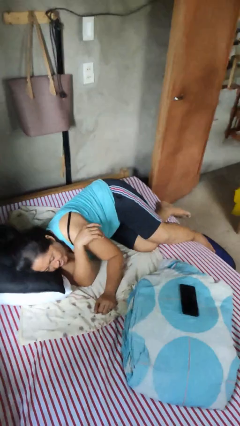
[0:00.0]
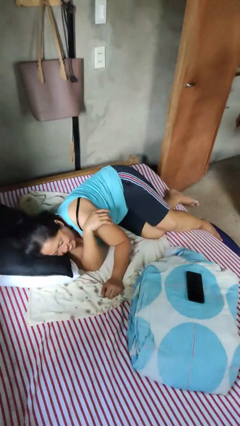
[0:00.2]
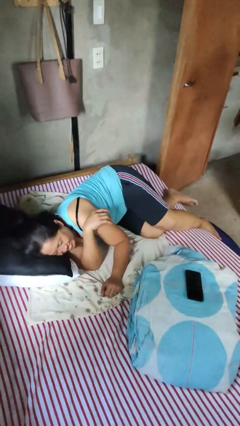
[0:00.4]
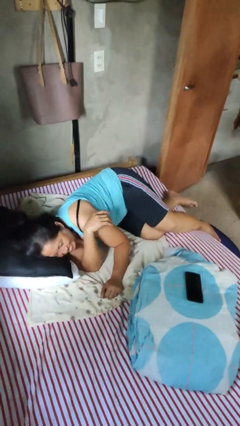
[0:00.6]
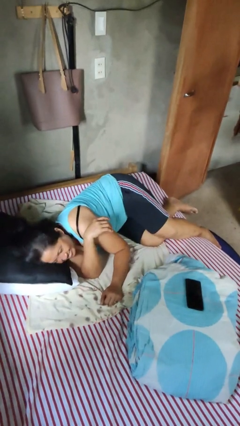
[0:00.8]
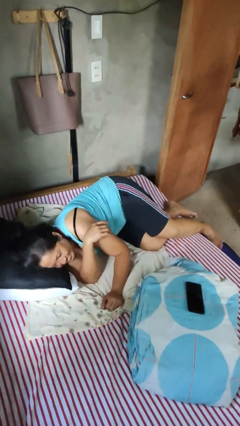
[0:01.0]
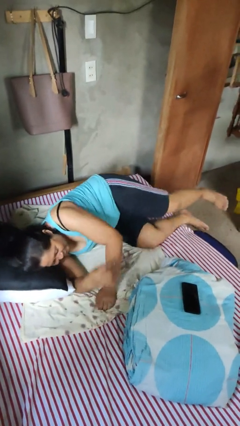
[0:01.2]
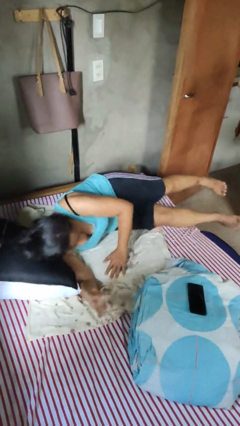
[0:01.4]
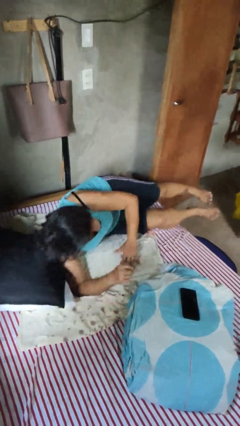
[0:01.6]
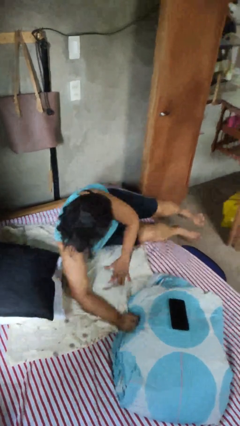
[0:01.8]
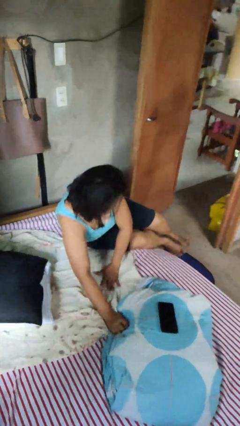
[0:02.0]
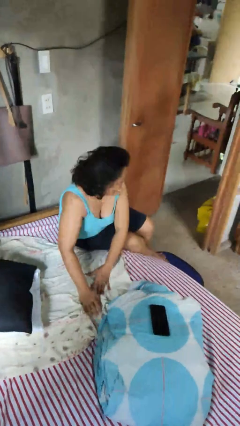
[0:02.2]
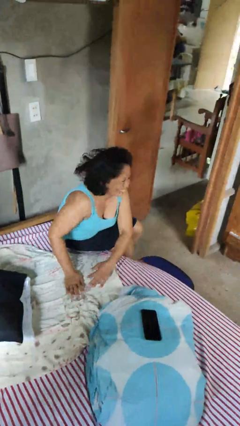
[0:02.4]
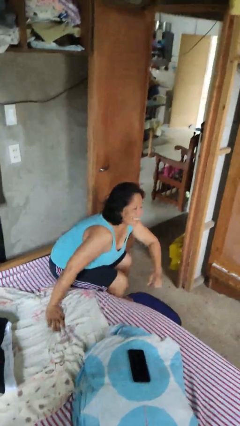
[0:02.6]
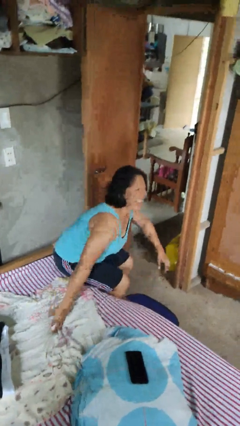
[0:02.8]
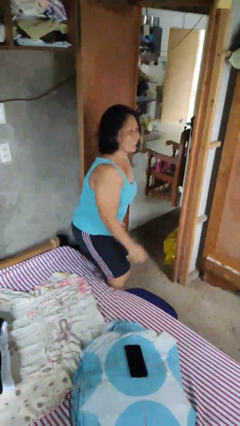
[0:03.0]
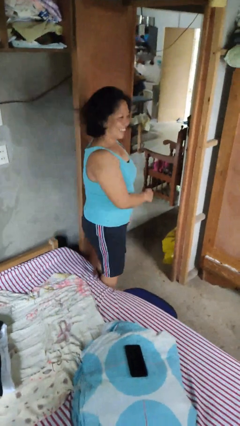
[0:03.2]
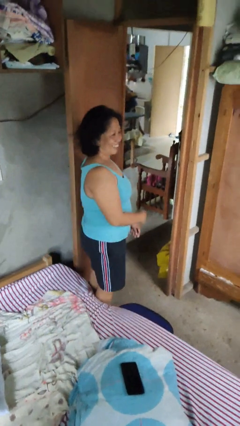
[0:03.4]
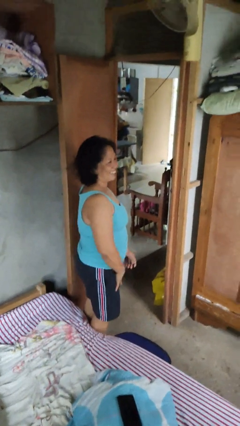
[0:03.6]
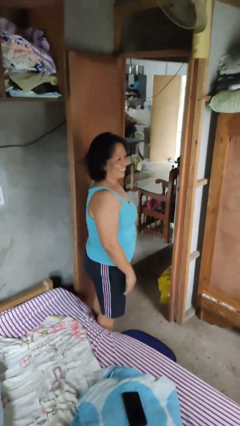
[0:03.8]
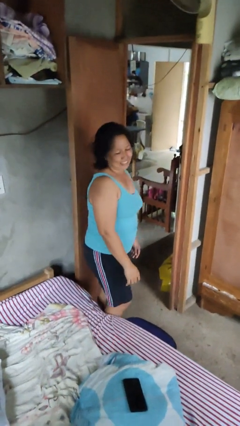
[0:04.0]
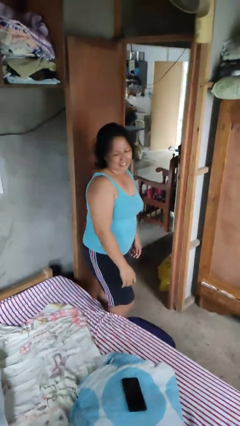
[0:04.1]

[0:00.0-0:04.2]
person stands up

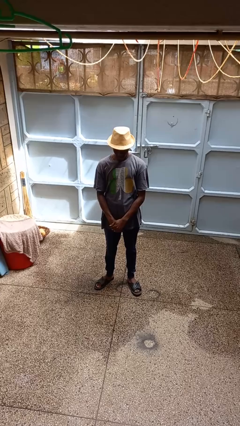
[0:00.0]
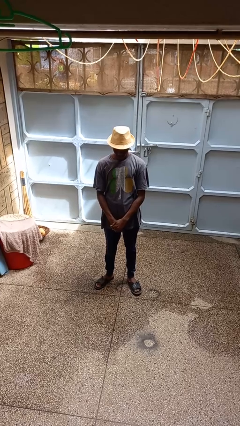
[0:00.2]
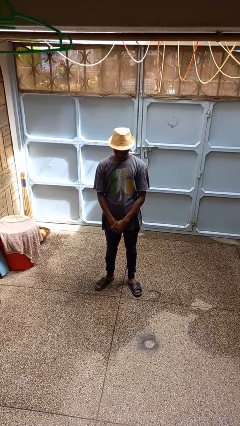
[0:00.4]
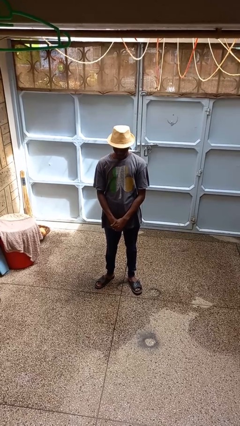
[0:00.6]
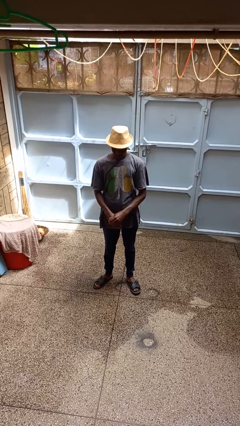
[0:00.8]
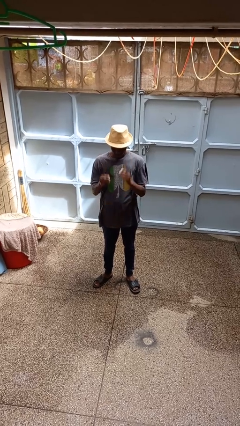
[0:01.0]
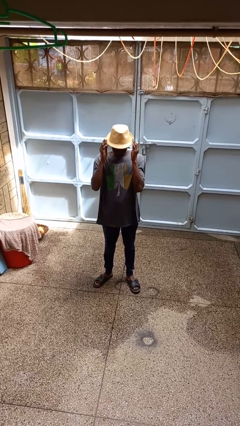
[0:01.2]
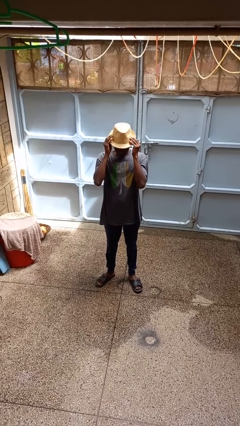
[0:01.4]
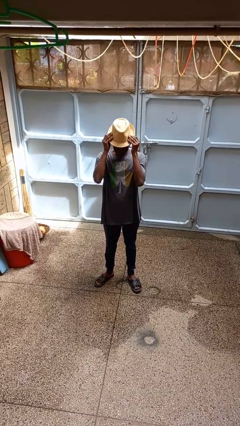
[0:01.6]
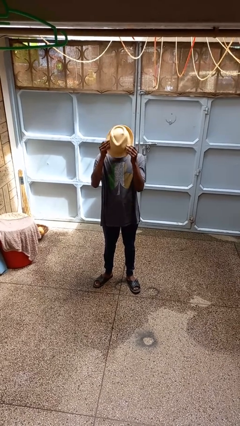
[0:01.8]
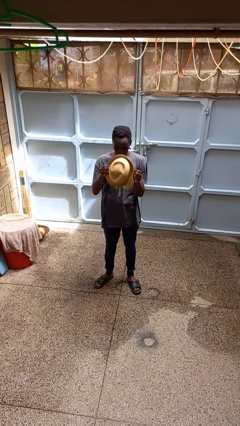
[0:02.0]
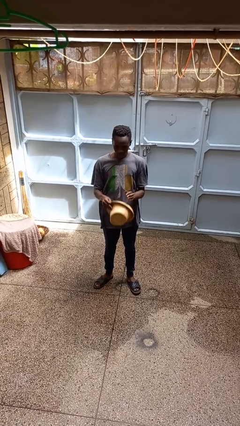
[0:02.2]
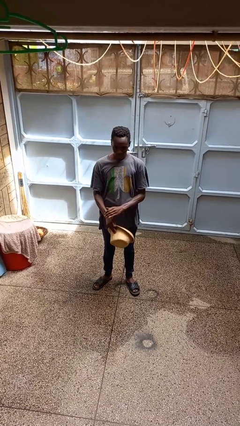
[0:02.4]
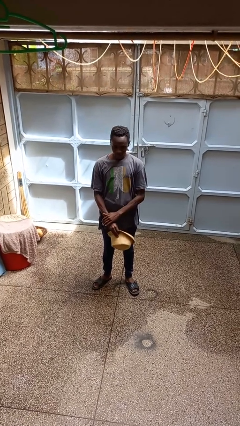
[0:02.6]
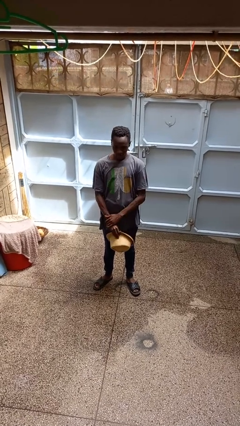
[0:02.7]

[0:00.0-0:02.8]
person takes off hat

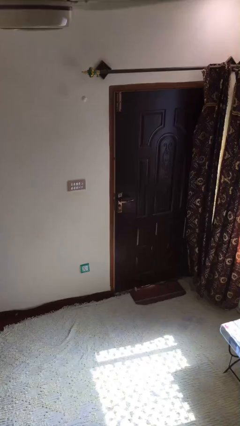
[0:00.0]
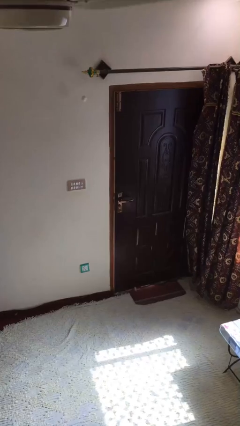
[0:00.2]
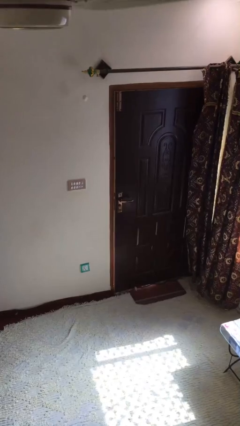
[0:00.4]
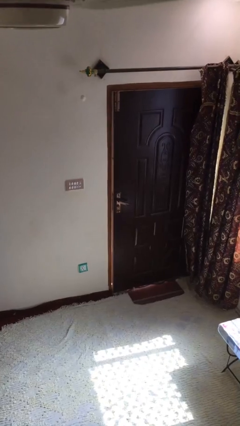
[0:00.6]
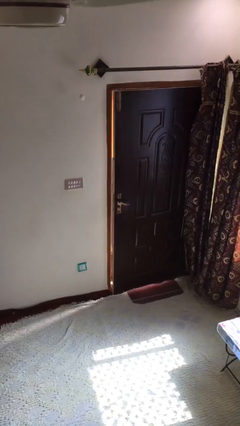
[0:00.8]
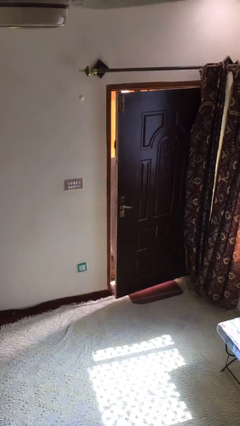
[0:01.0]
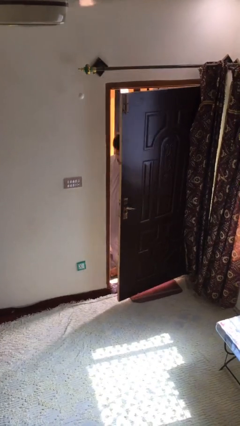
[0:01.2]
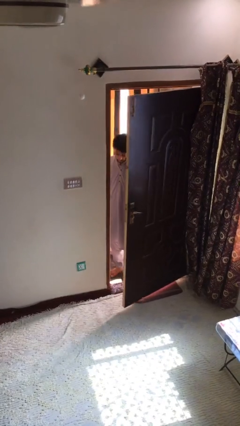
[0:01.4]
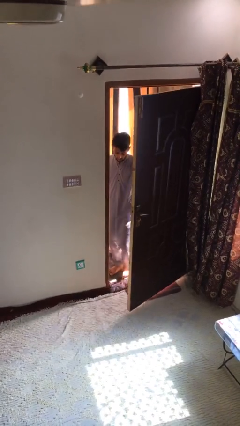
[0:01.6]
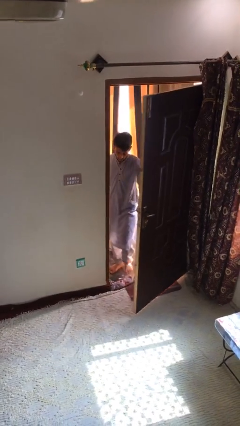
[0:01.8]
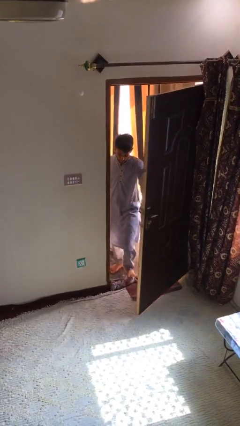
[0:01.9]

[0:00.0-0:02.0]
person opens facility door

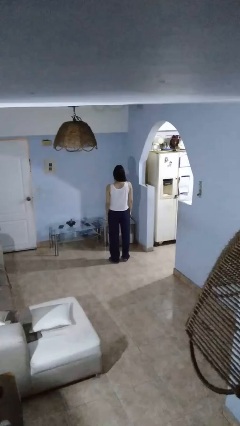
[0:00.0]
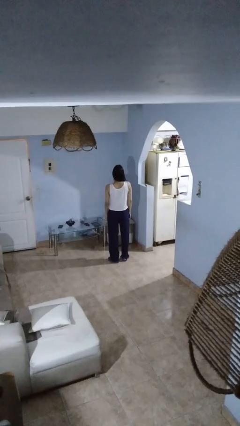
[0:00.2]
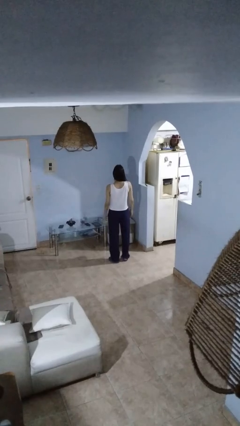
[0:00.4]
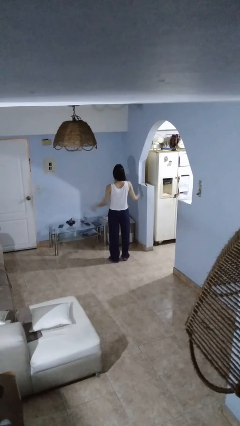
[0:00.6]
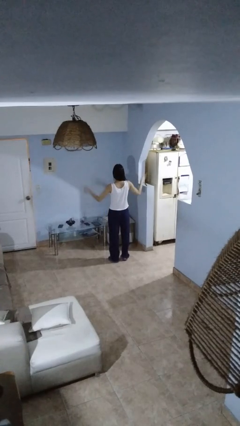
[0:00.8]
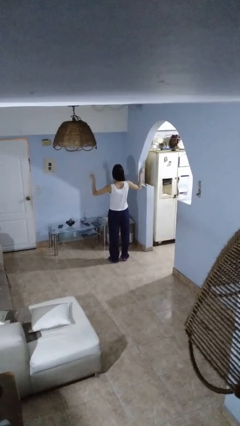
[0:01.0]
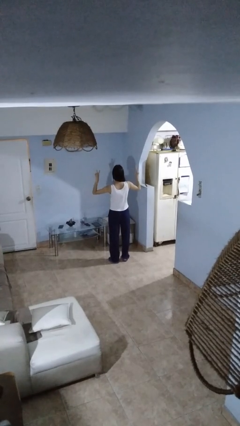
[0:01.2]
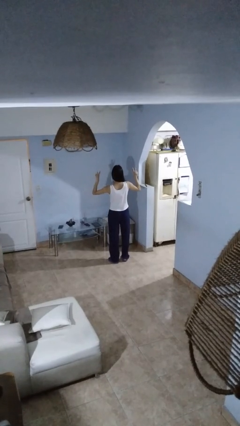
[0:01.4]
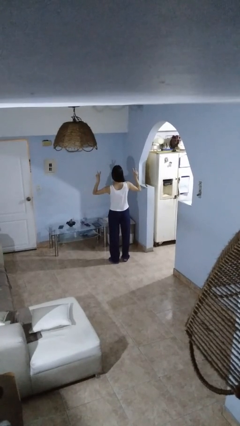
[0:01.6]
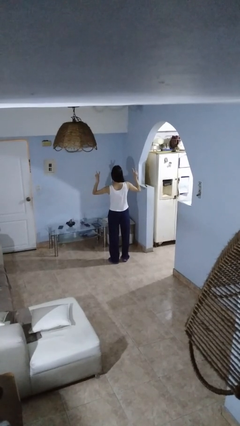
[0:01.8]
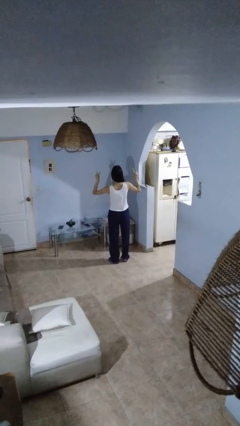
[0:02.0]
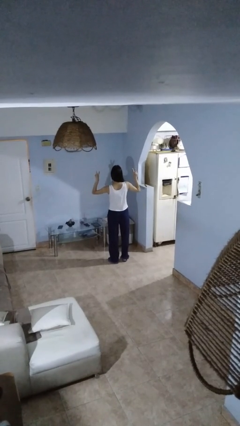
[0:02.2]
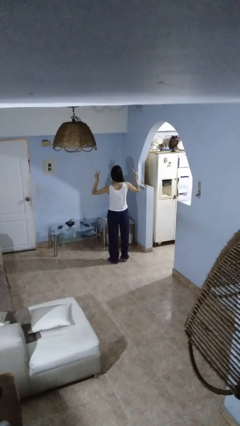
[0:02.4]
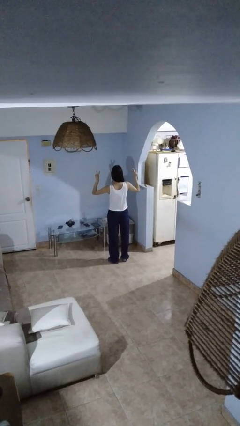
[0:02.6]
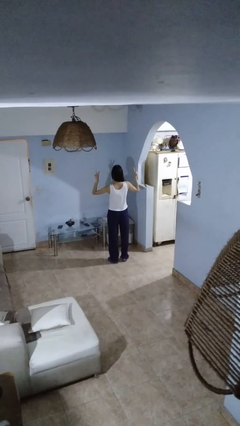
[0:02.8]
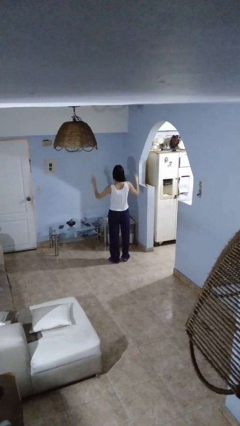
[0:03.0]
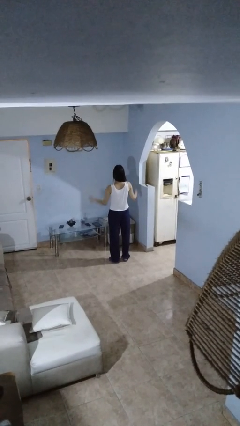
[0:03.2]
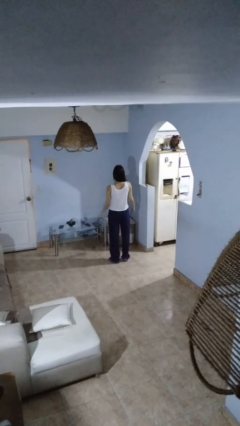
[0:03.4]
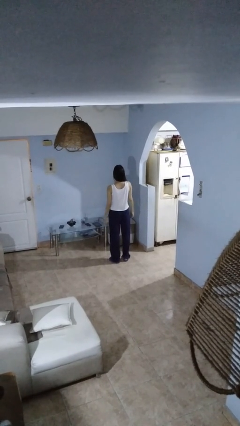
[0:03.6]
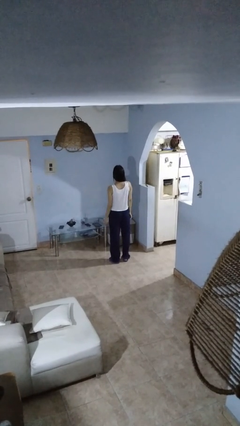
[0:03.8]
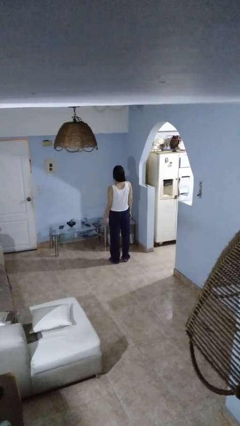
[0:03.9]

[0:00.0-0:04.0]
person gestures peace

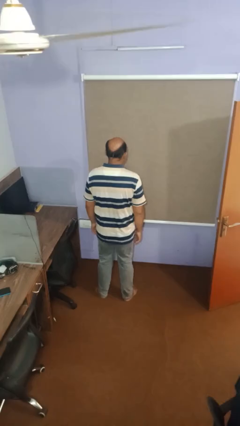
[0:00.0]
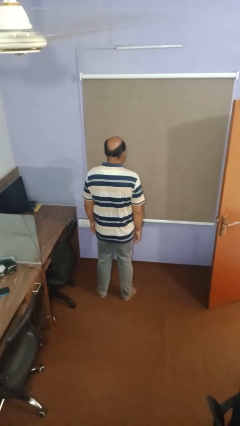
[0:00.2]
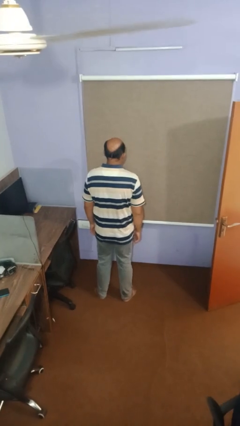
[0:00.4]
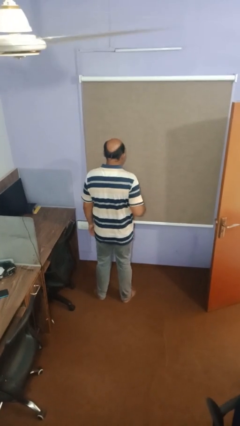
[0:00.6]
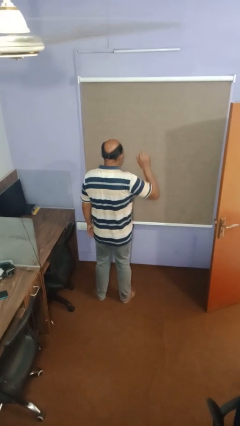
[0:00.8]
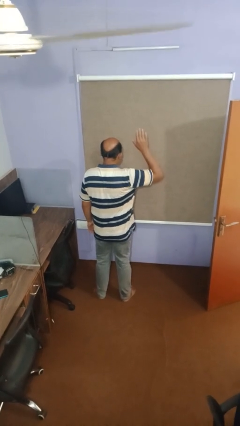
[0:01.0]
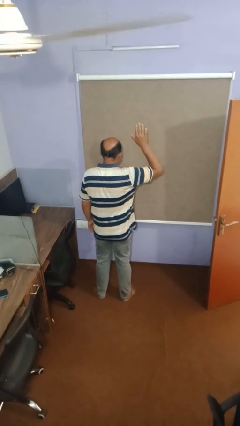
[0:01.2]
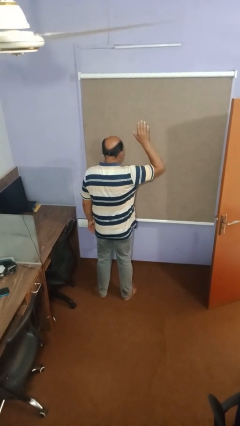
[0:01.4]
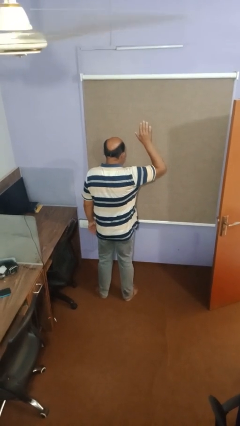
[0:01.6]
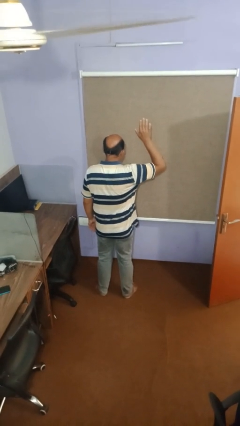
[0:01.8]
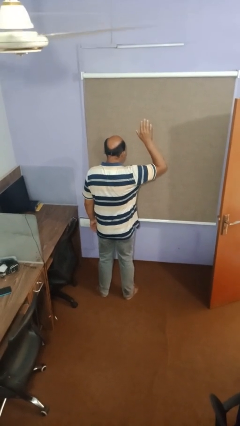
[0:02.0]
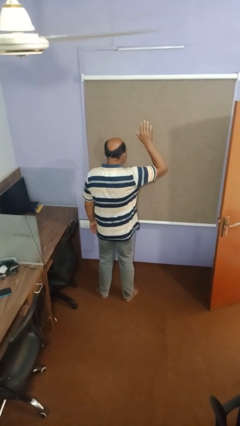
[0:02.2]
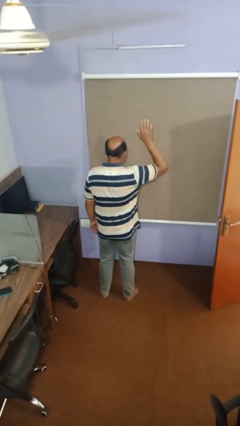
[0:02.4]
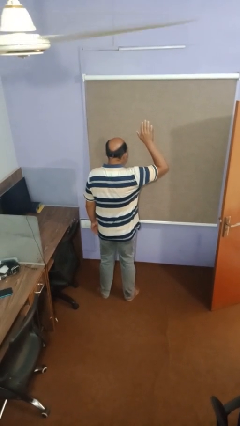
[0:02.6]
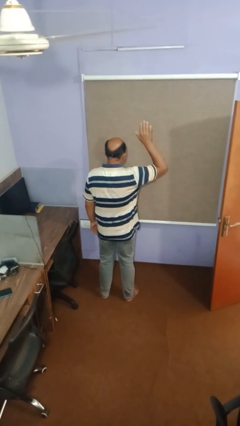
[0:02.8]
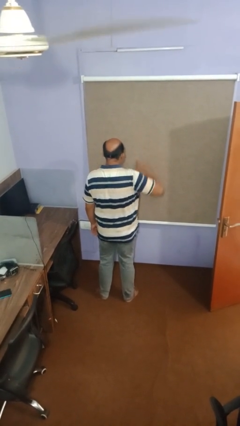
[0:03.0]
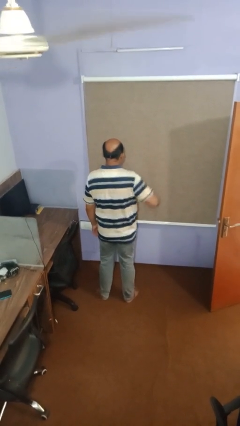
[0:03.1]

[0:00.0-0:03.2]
person gestures raise hand

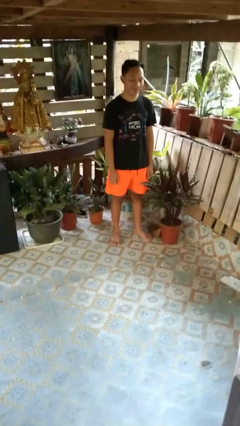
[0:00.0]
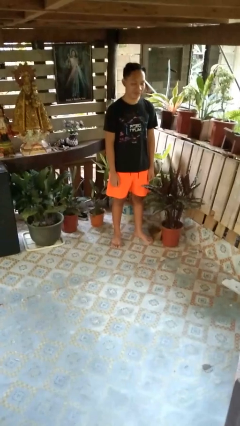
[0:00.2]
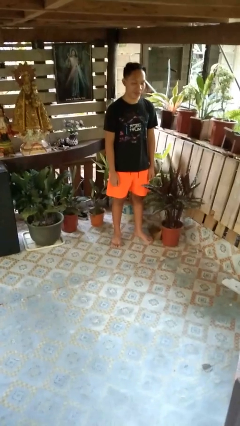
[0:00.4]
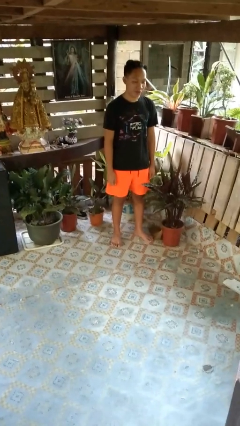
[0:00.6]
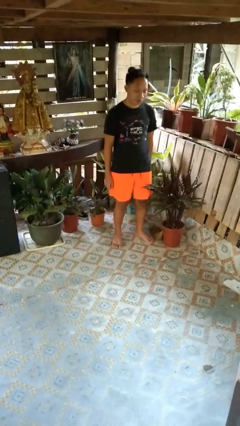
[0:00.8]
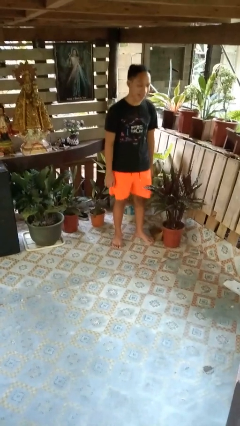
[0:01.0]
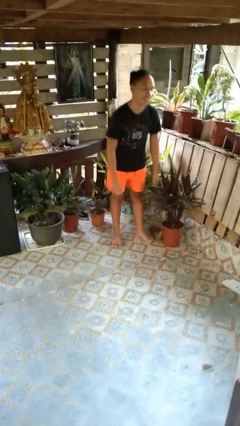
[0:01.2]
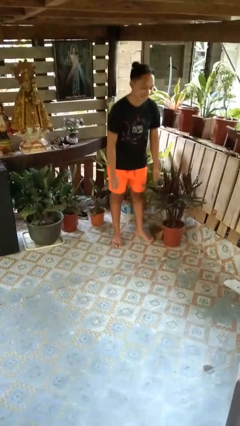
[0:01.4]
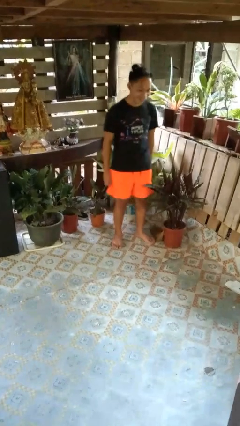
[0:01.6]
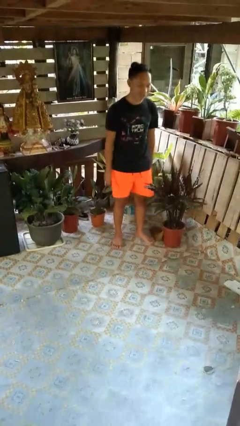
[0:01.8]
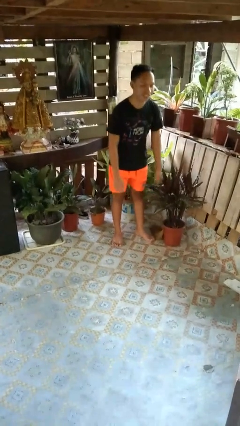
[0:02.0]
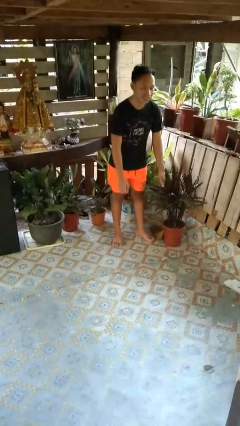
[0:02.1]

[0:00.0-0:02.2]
person wiggles hips
